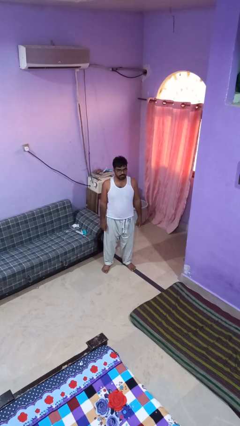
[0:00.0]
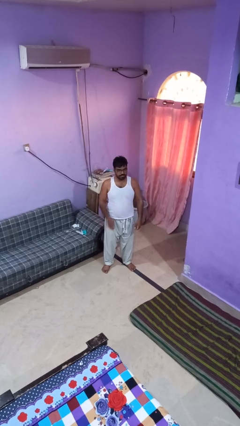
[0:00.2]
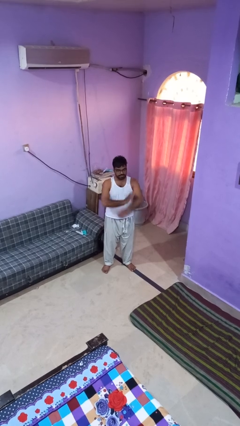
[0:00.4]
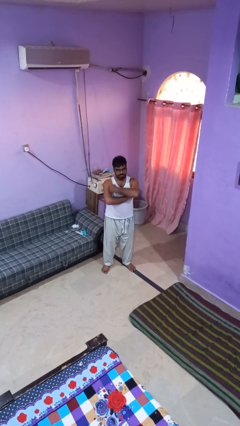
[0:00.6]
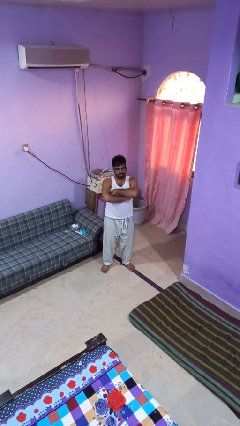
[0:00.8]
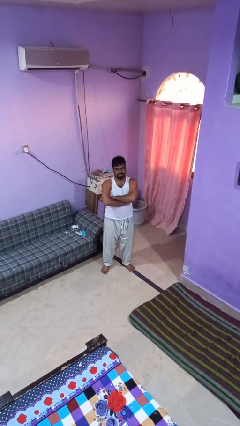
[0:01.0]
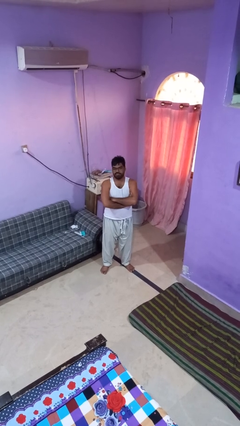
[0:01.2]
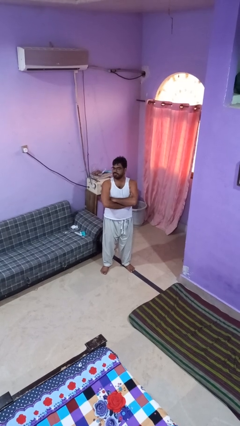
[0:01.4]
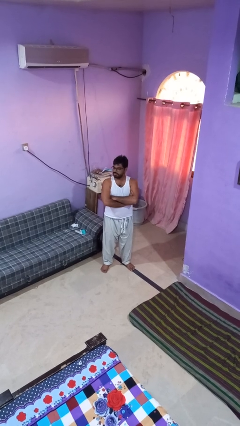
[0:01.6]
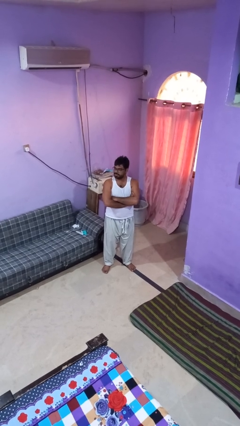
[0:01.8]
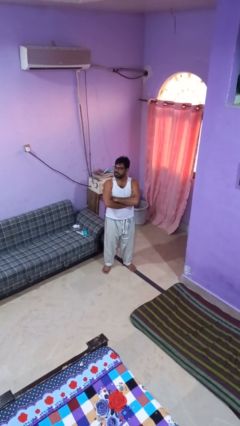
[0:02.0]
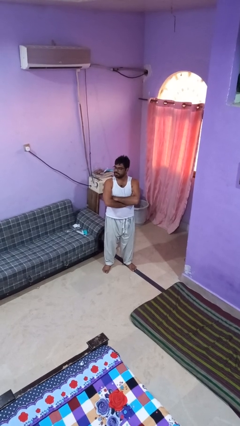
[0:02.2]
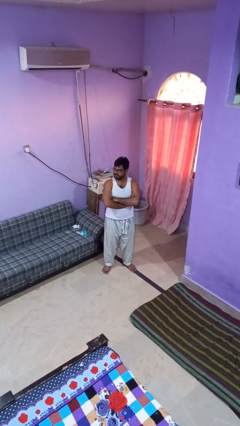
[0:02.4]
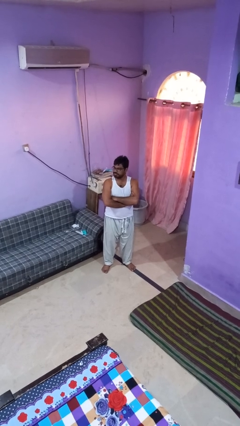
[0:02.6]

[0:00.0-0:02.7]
person crosses arms

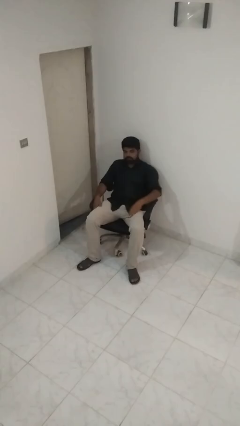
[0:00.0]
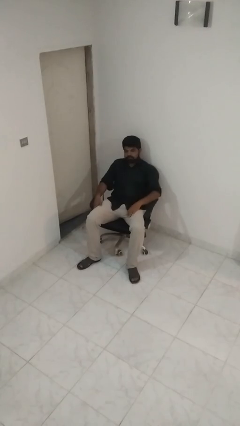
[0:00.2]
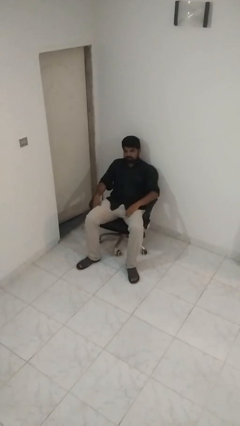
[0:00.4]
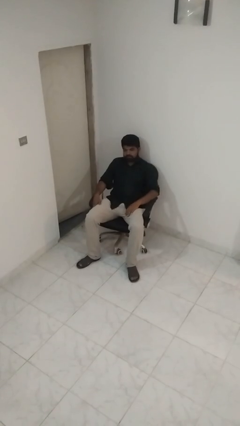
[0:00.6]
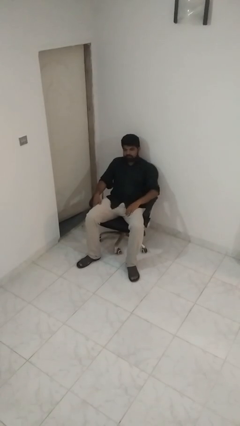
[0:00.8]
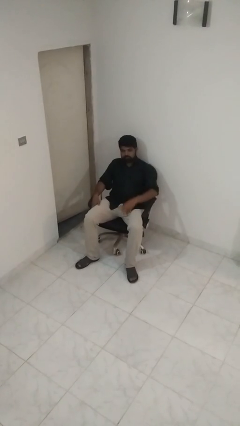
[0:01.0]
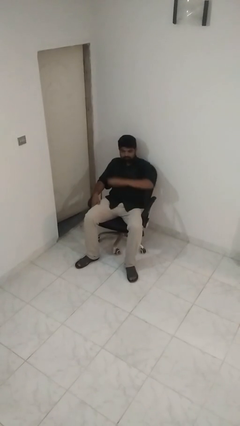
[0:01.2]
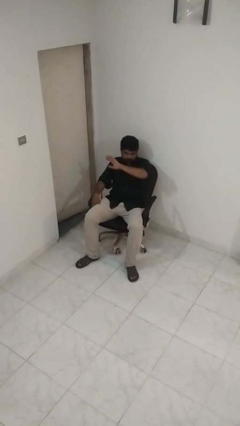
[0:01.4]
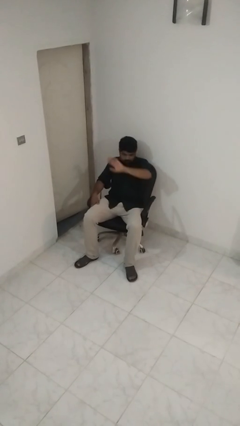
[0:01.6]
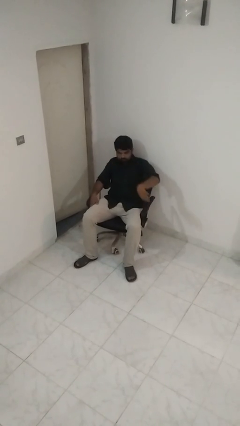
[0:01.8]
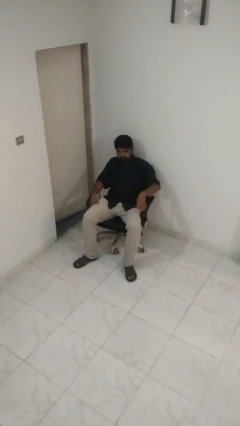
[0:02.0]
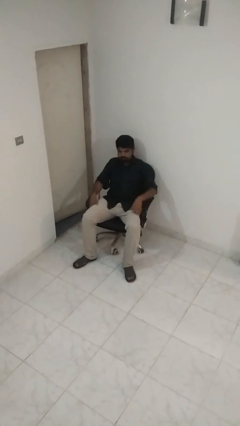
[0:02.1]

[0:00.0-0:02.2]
person gestures swipe left

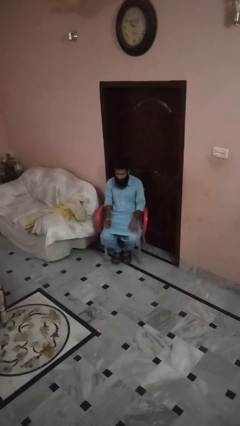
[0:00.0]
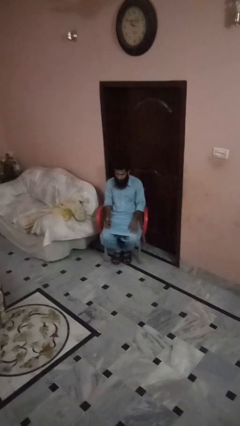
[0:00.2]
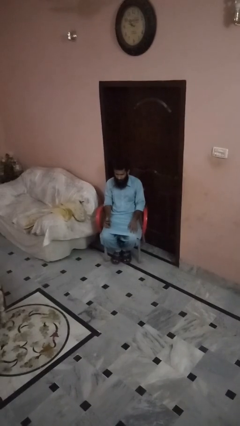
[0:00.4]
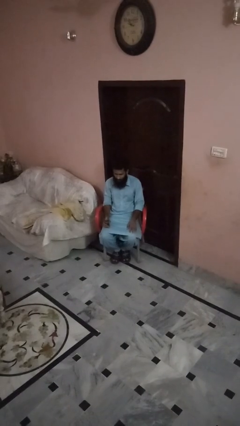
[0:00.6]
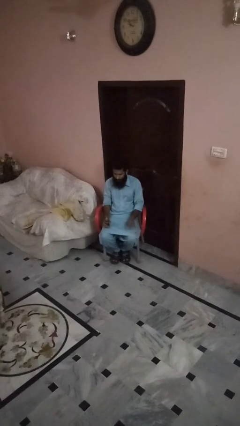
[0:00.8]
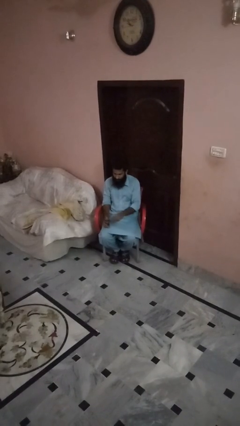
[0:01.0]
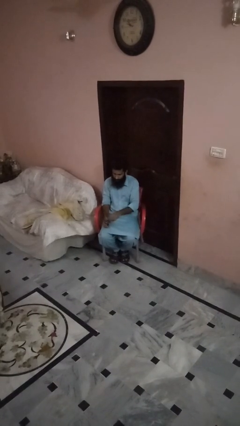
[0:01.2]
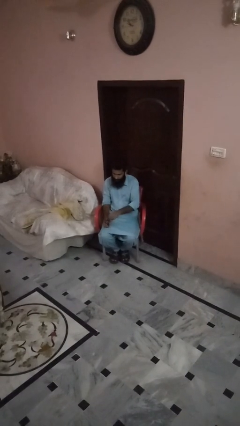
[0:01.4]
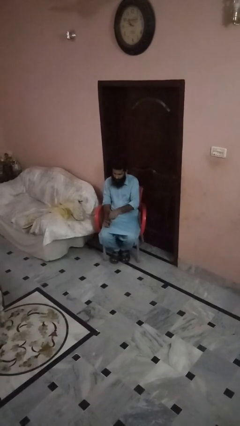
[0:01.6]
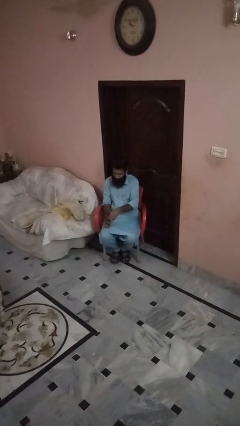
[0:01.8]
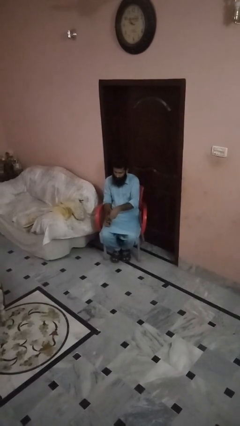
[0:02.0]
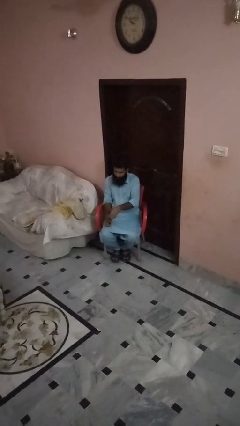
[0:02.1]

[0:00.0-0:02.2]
person opens beverage can

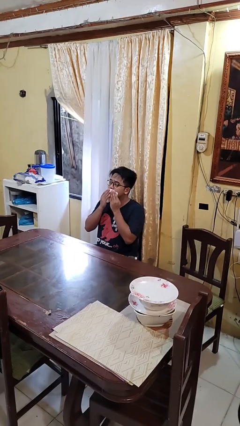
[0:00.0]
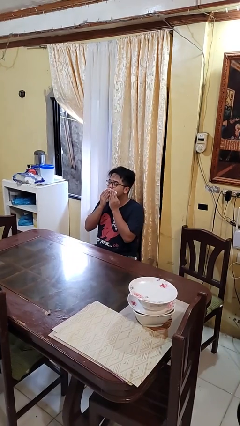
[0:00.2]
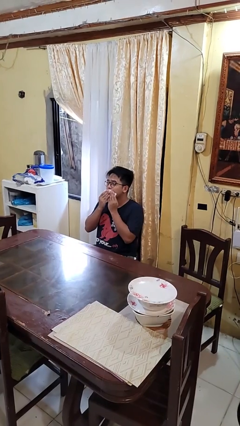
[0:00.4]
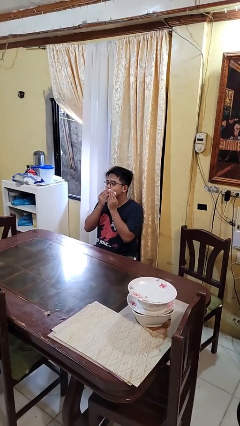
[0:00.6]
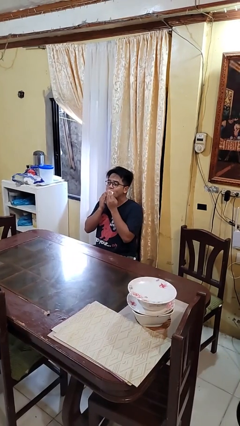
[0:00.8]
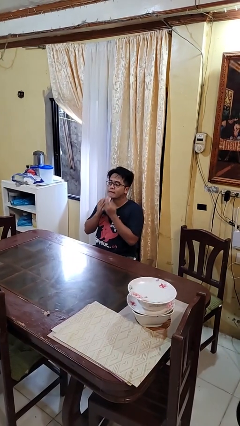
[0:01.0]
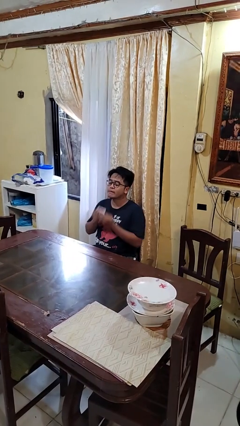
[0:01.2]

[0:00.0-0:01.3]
person wipes mouth with napkin

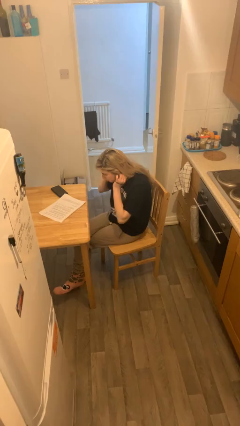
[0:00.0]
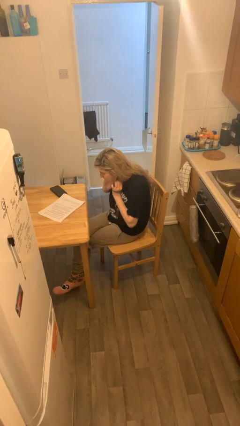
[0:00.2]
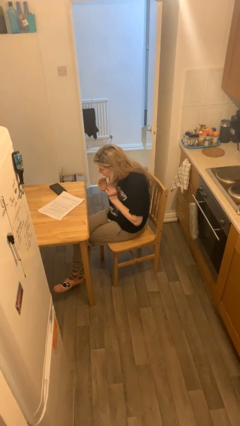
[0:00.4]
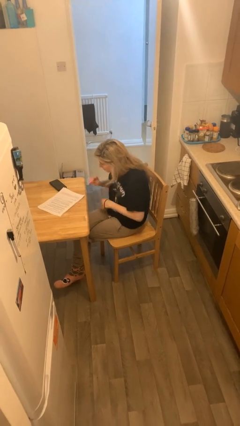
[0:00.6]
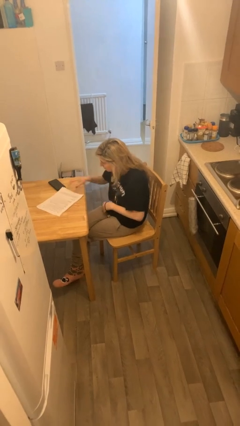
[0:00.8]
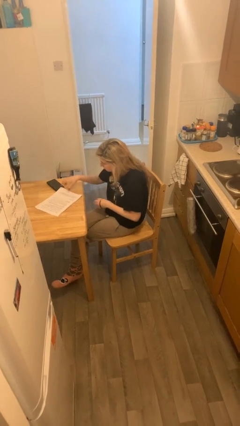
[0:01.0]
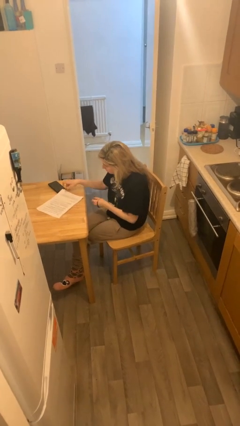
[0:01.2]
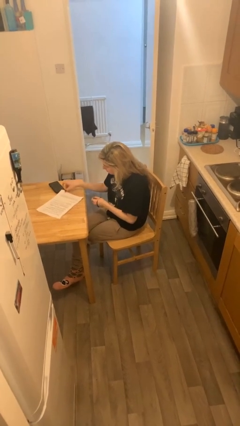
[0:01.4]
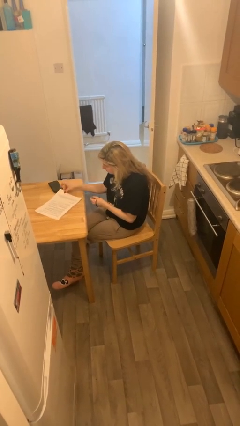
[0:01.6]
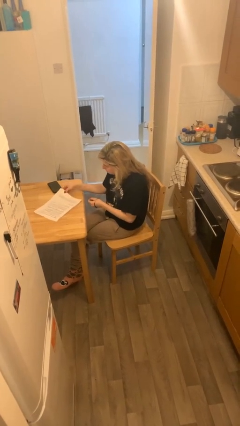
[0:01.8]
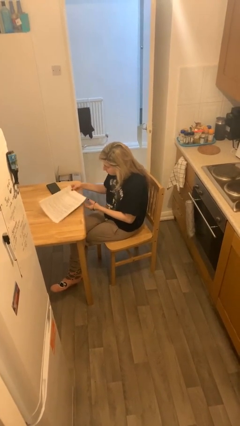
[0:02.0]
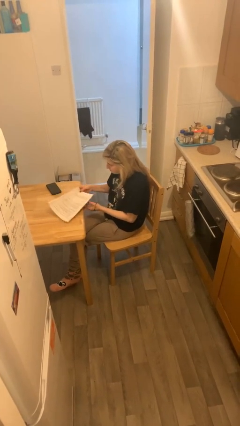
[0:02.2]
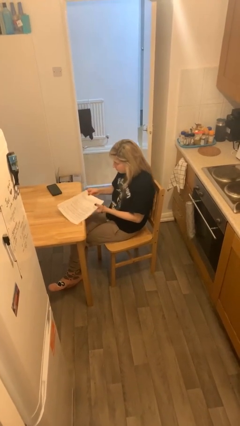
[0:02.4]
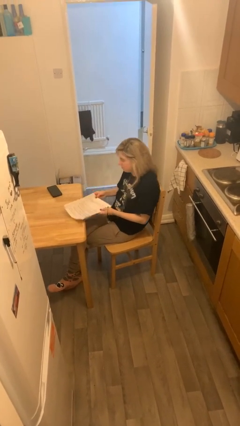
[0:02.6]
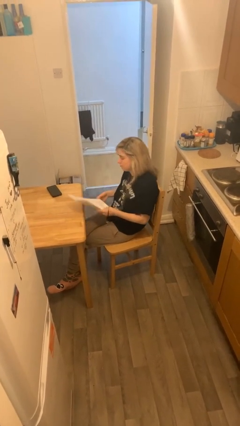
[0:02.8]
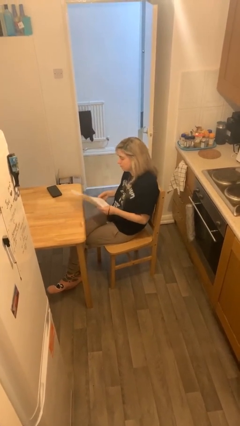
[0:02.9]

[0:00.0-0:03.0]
person picks up object from table

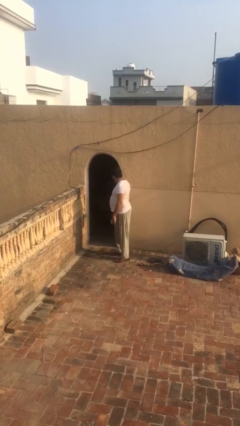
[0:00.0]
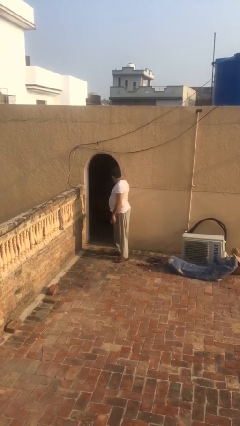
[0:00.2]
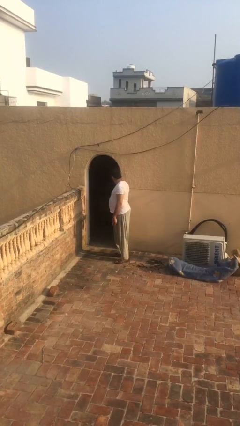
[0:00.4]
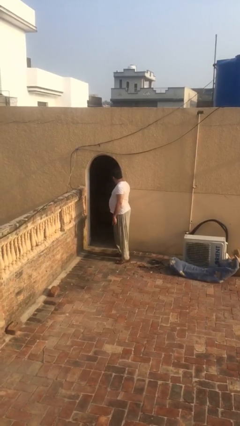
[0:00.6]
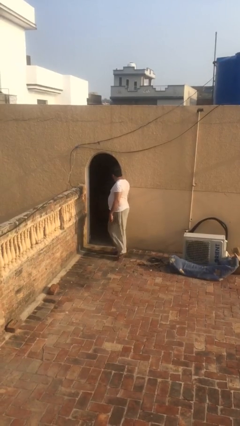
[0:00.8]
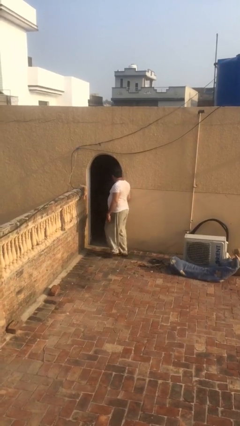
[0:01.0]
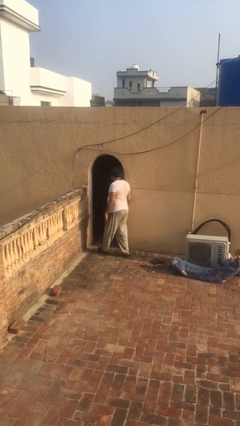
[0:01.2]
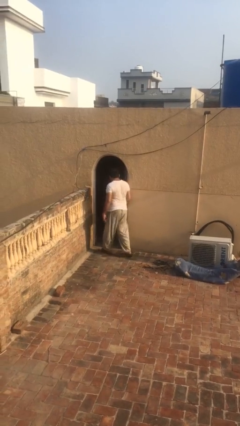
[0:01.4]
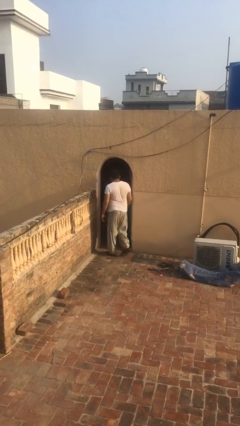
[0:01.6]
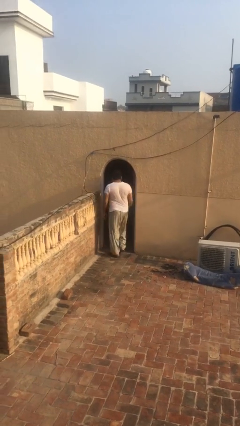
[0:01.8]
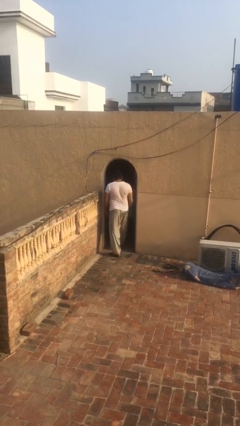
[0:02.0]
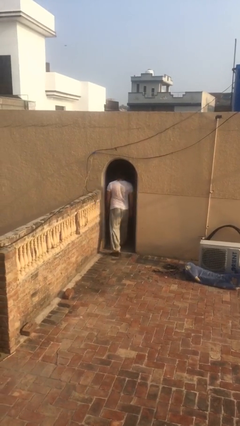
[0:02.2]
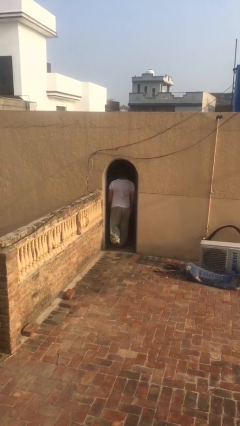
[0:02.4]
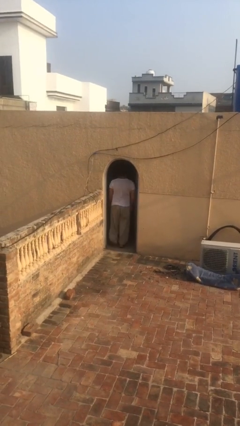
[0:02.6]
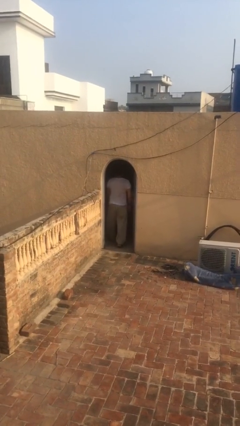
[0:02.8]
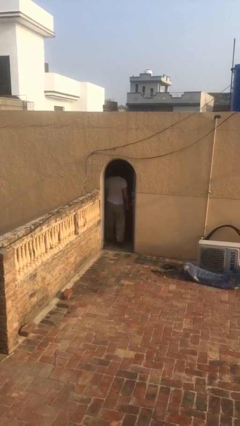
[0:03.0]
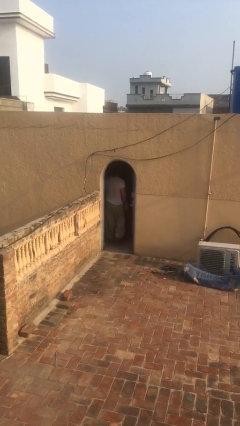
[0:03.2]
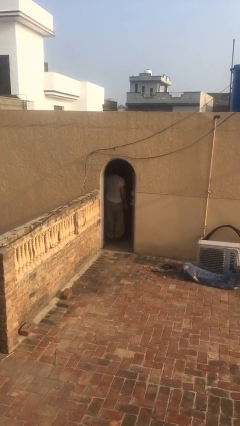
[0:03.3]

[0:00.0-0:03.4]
person exits scene through structure

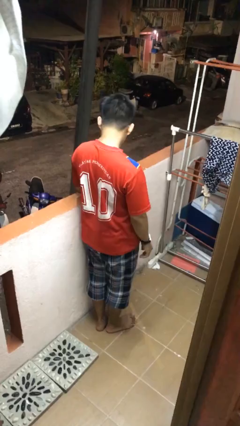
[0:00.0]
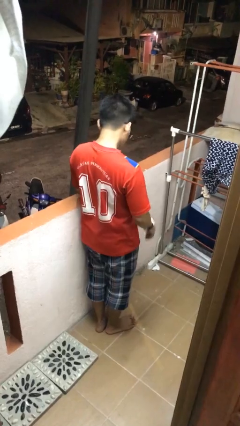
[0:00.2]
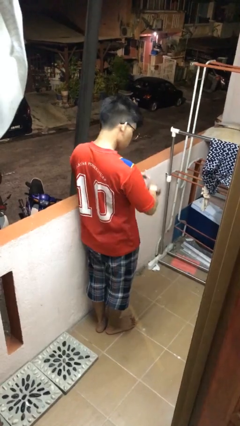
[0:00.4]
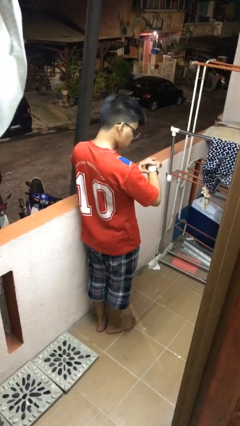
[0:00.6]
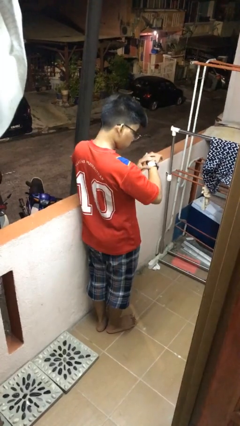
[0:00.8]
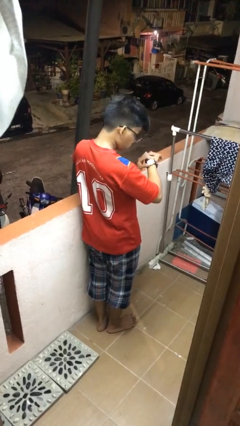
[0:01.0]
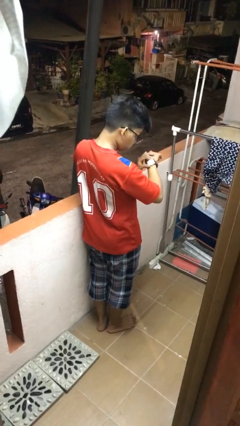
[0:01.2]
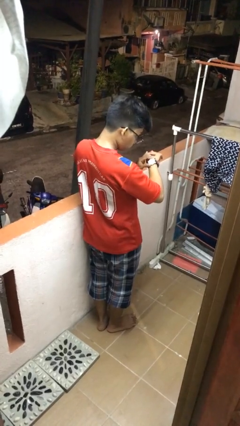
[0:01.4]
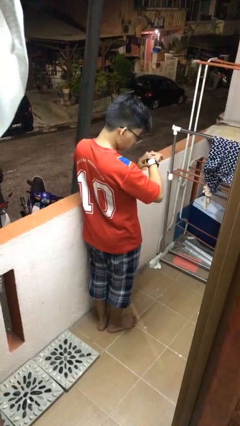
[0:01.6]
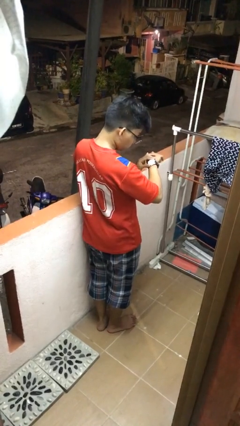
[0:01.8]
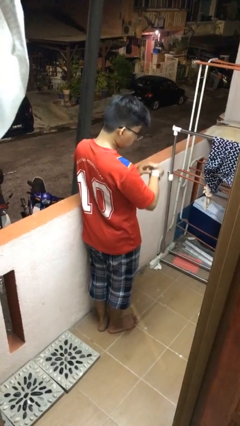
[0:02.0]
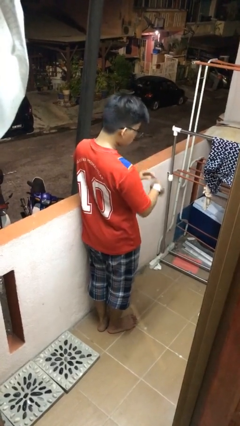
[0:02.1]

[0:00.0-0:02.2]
person looks at wristwatch

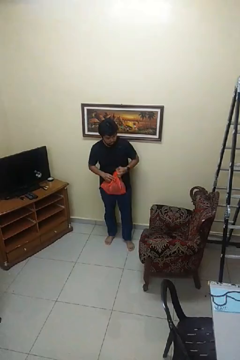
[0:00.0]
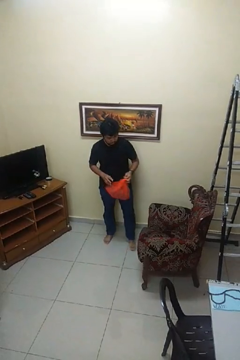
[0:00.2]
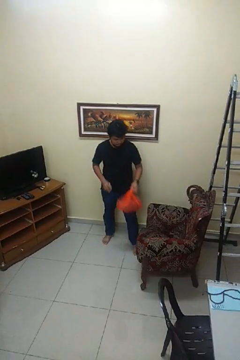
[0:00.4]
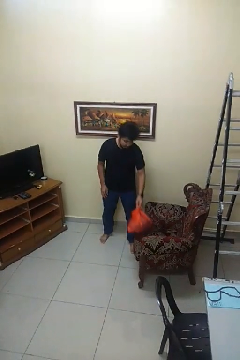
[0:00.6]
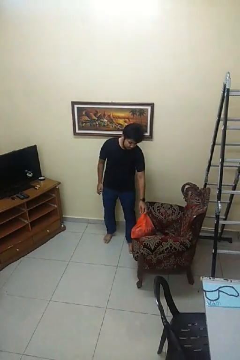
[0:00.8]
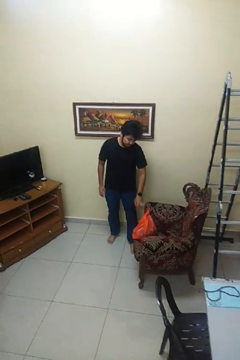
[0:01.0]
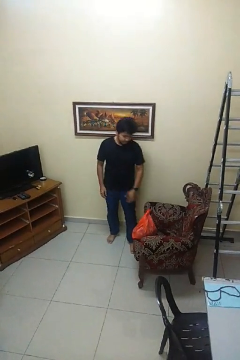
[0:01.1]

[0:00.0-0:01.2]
person puts down object on couch
